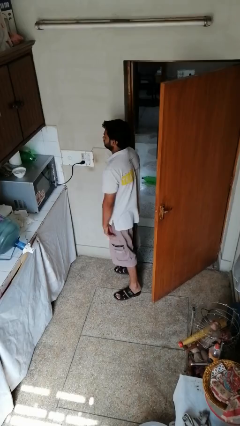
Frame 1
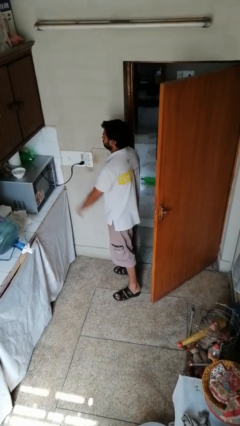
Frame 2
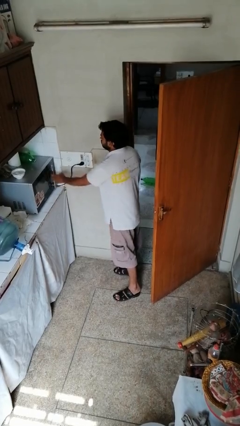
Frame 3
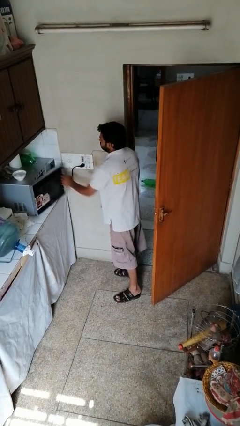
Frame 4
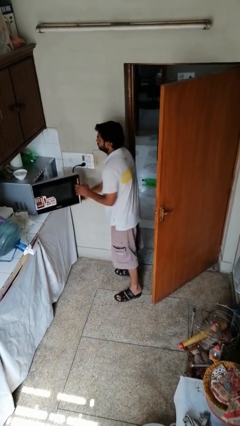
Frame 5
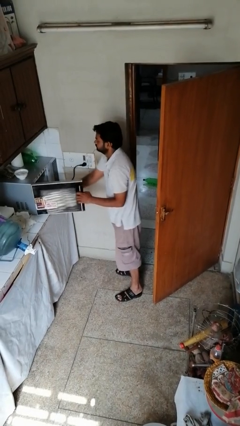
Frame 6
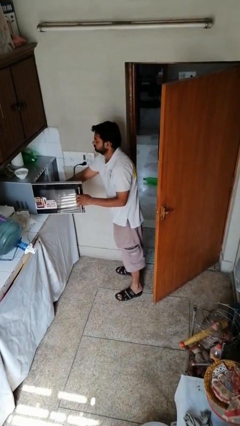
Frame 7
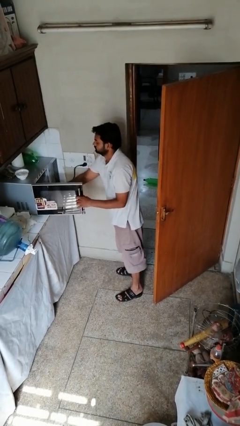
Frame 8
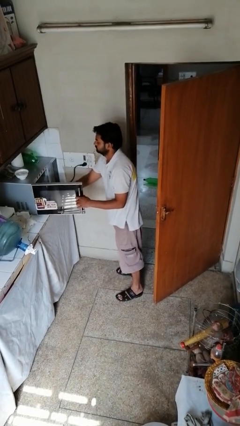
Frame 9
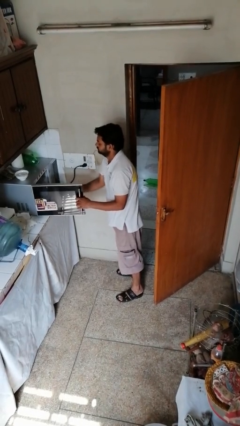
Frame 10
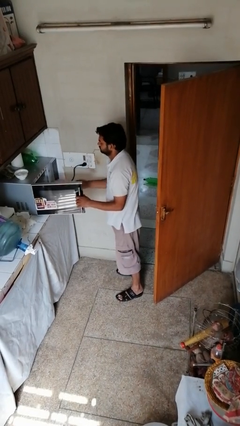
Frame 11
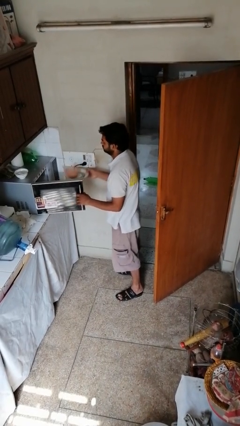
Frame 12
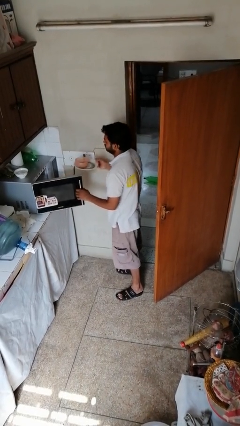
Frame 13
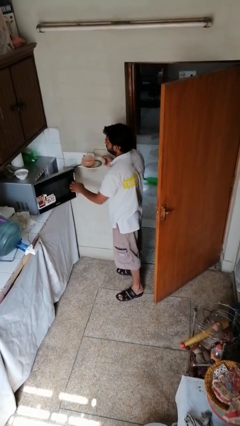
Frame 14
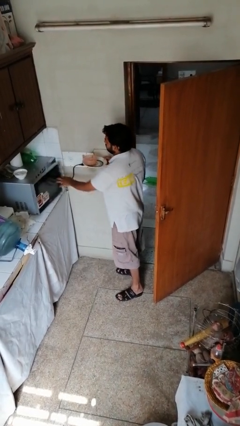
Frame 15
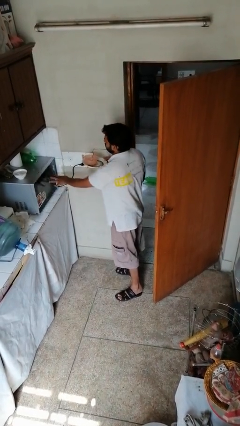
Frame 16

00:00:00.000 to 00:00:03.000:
person takes object from microwave

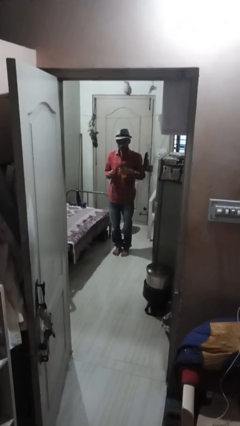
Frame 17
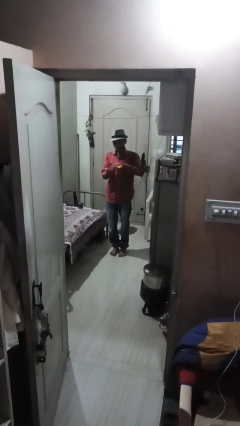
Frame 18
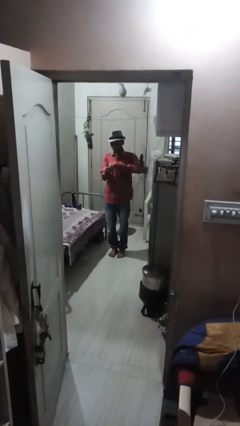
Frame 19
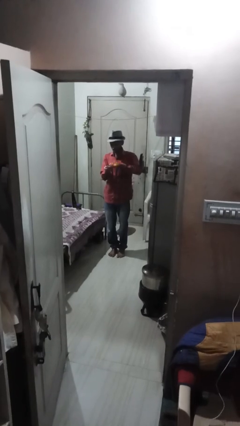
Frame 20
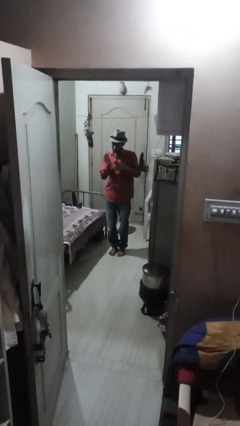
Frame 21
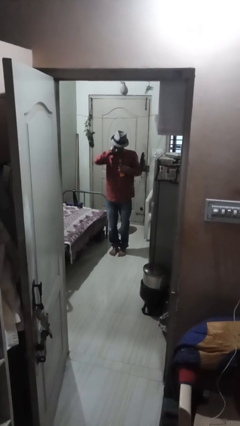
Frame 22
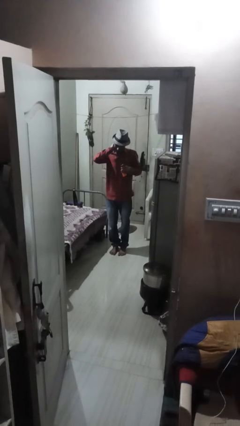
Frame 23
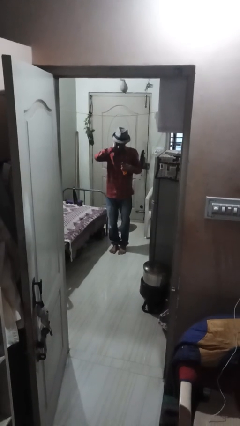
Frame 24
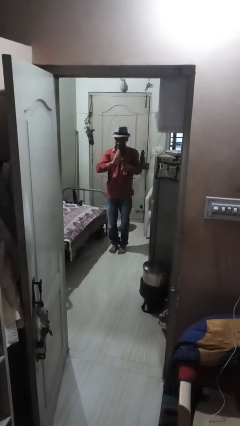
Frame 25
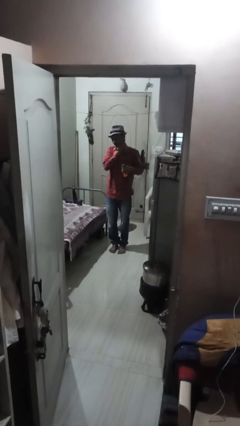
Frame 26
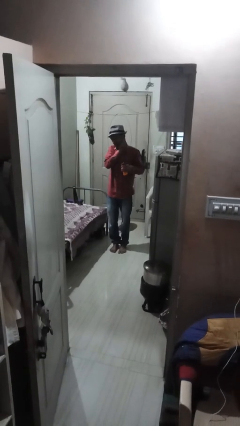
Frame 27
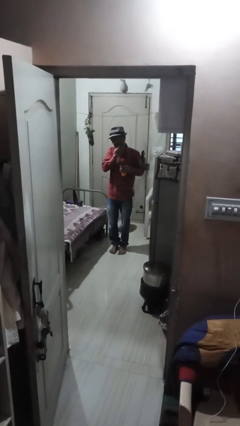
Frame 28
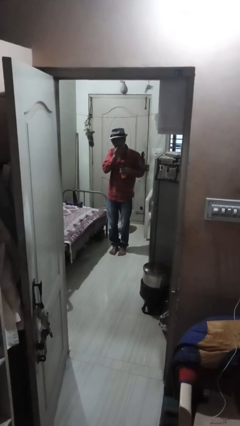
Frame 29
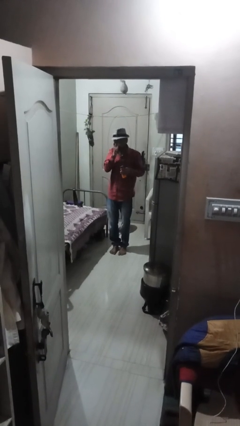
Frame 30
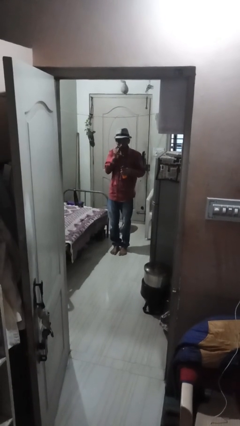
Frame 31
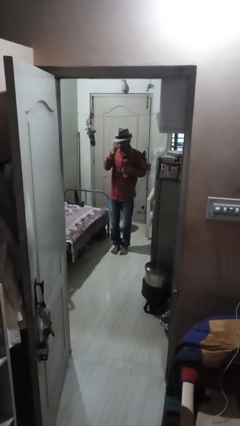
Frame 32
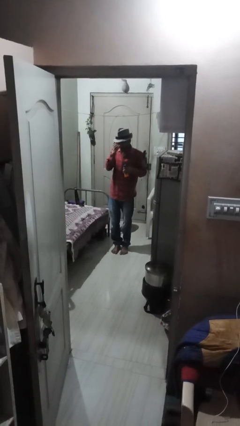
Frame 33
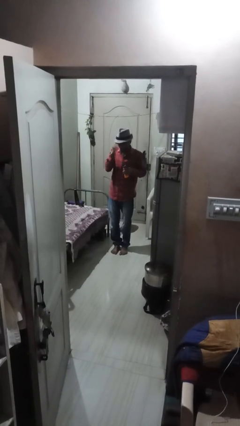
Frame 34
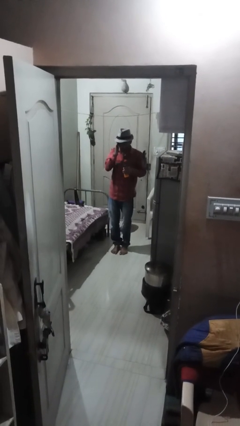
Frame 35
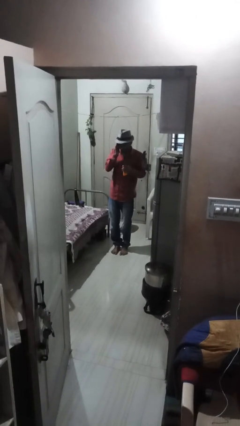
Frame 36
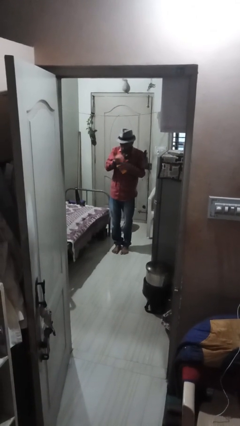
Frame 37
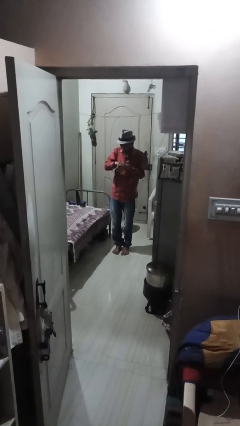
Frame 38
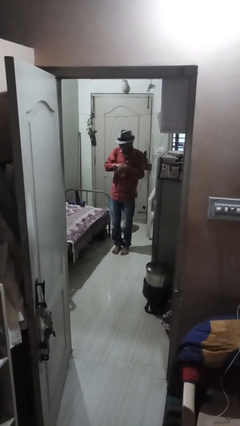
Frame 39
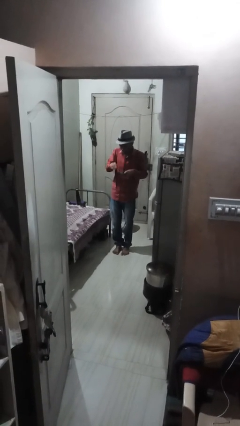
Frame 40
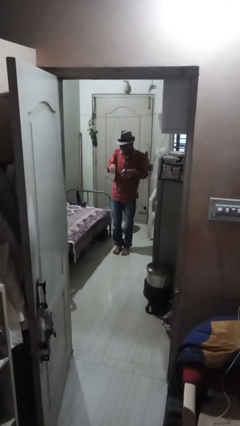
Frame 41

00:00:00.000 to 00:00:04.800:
person applies sunscreen

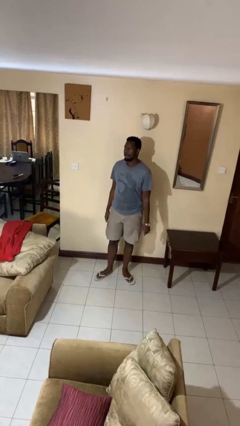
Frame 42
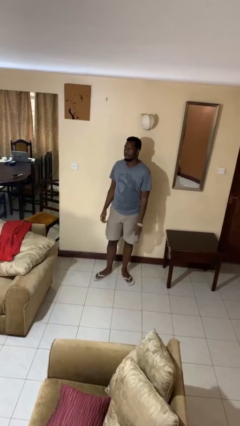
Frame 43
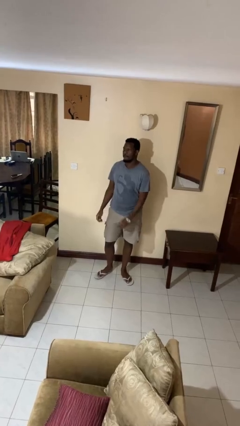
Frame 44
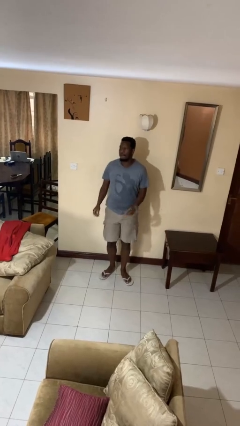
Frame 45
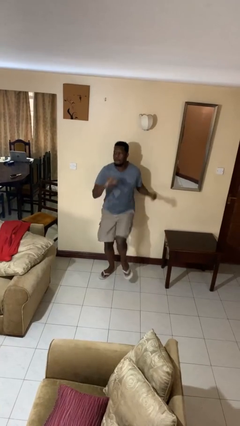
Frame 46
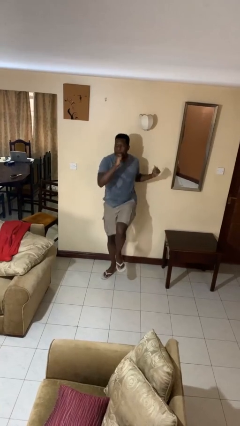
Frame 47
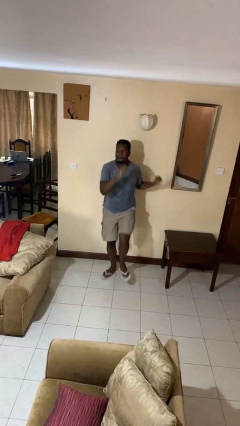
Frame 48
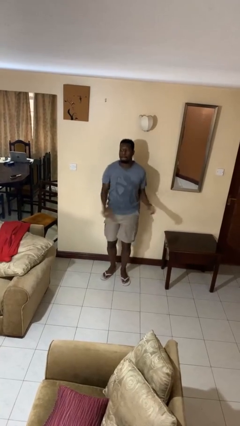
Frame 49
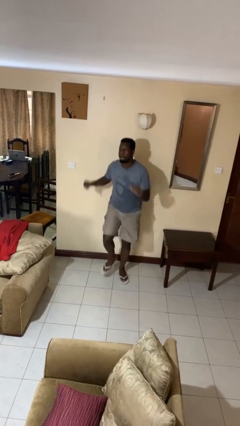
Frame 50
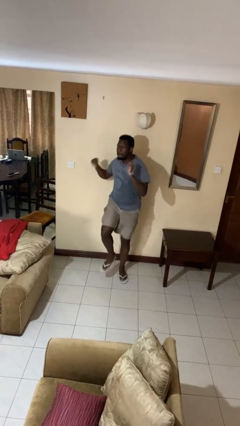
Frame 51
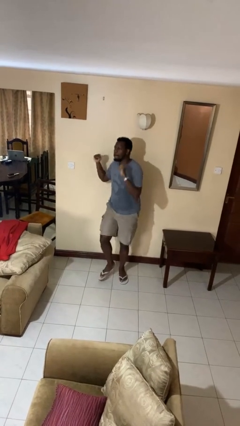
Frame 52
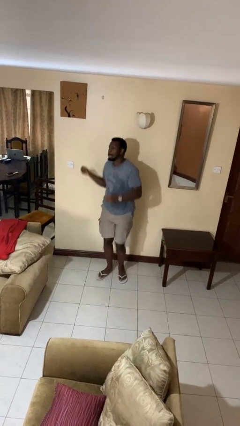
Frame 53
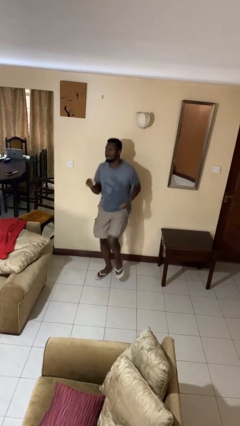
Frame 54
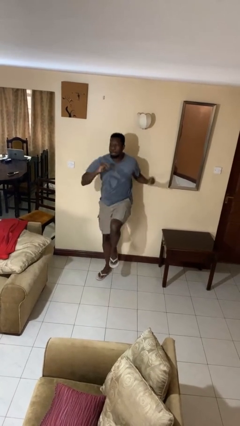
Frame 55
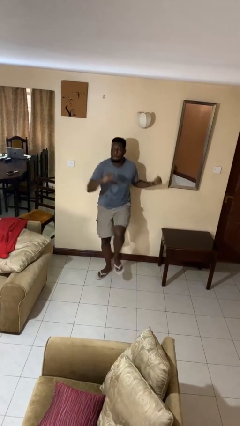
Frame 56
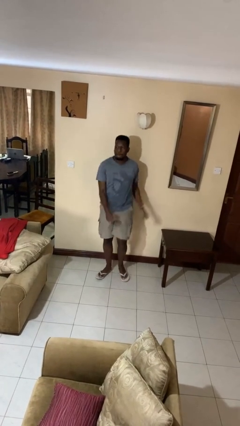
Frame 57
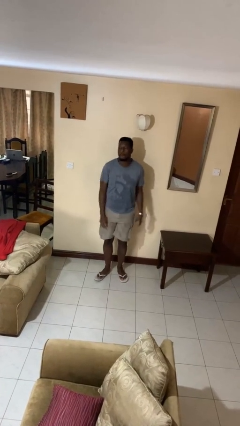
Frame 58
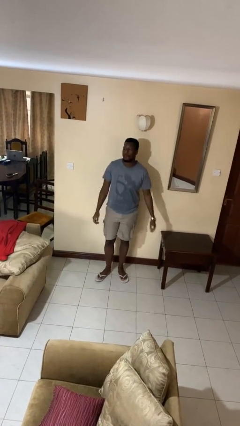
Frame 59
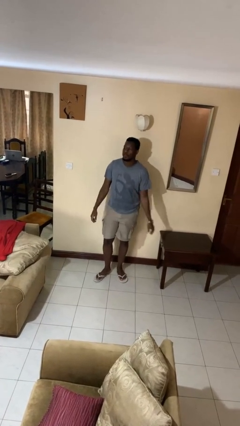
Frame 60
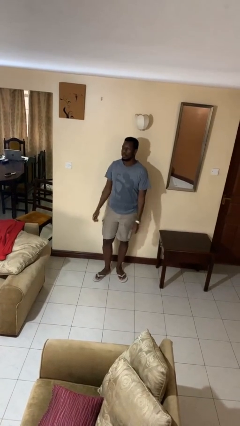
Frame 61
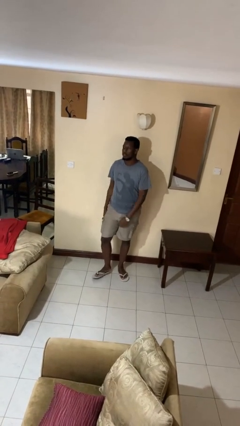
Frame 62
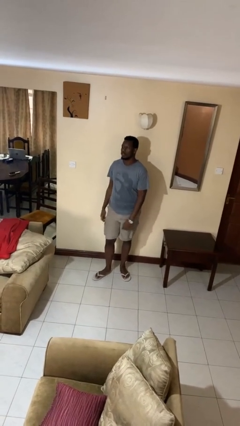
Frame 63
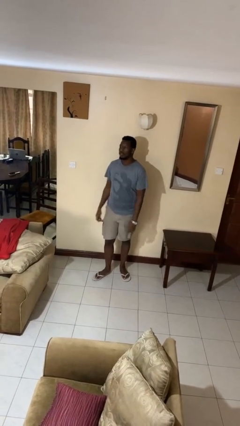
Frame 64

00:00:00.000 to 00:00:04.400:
person dances in place

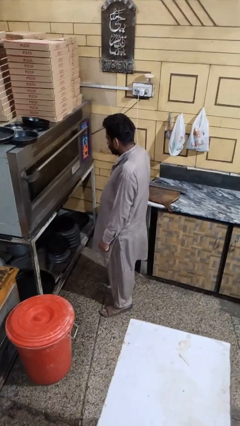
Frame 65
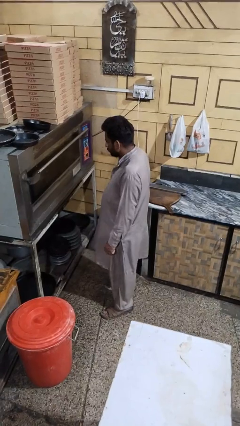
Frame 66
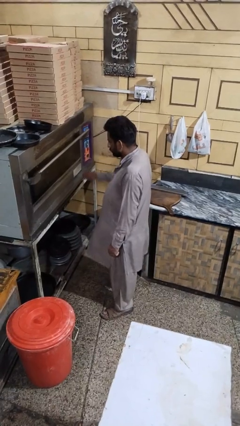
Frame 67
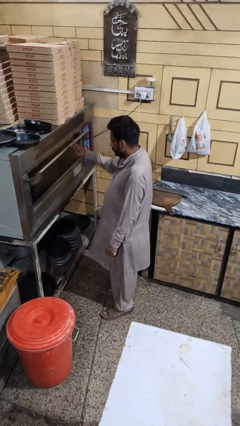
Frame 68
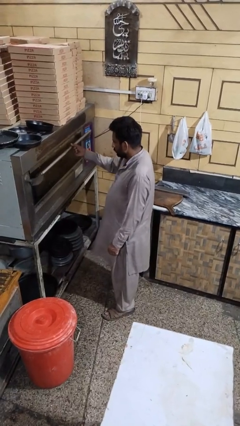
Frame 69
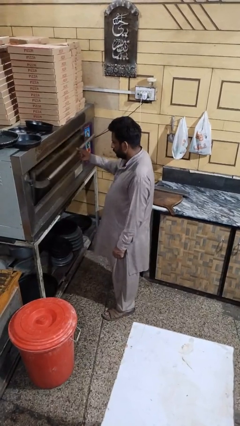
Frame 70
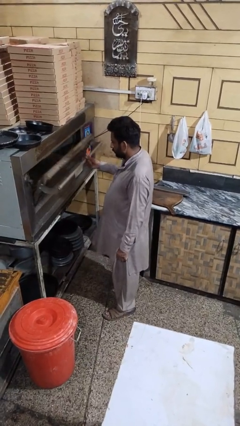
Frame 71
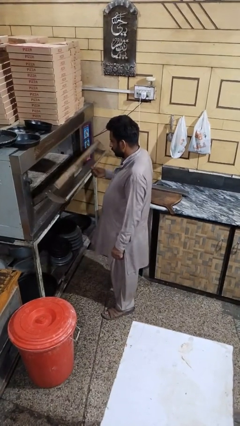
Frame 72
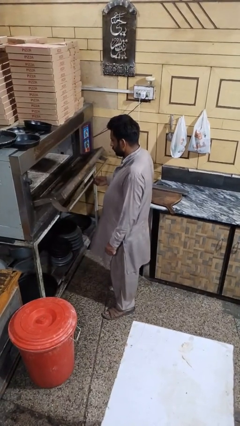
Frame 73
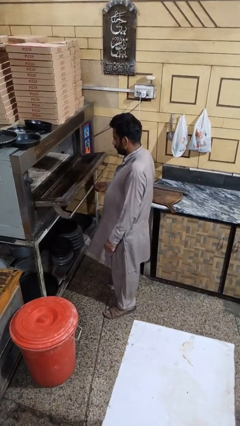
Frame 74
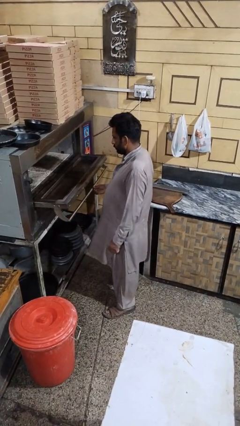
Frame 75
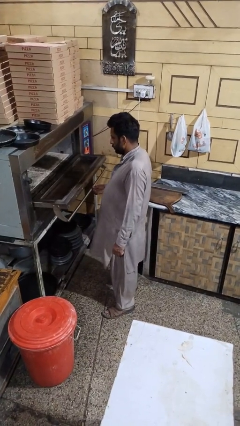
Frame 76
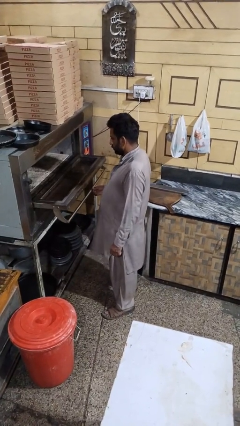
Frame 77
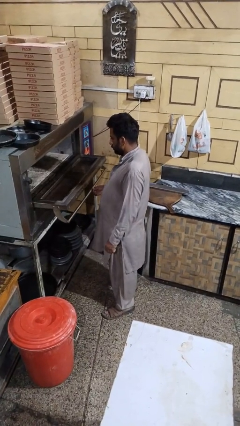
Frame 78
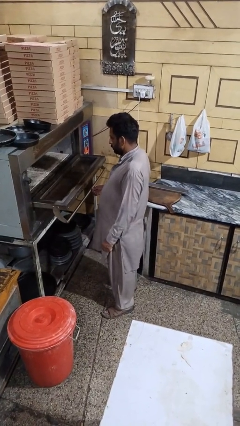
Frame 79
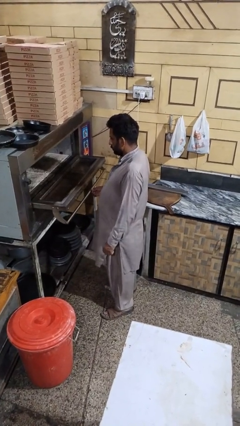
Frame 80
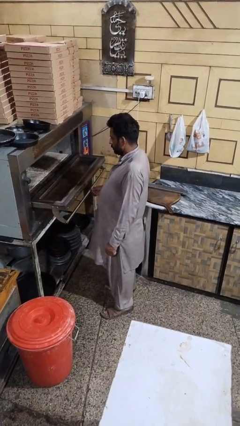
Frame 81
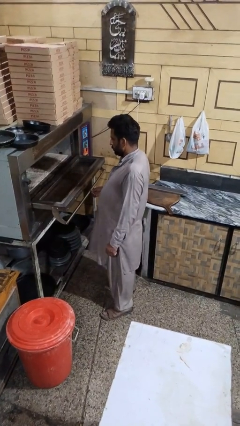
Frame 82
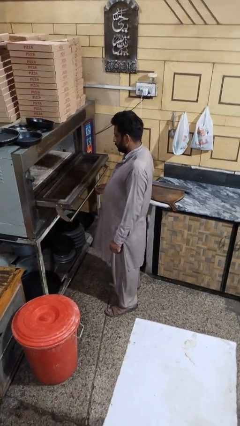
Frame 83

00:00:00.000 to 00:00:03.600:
person opens microwave

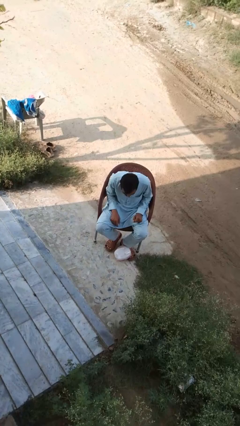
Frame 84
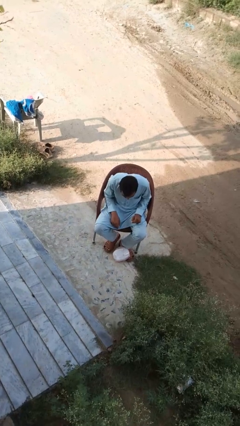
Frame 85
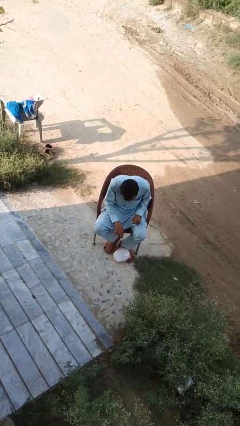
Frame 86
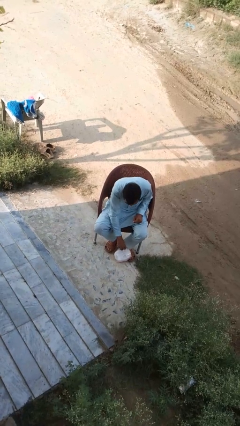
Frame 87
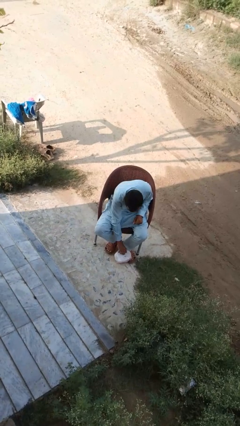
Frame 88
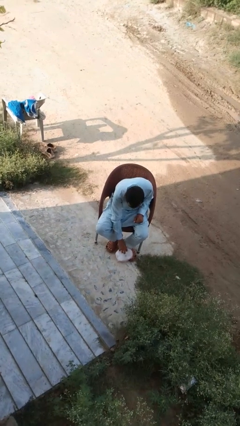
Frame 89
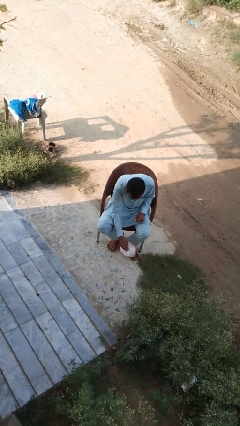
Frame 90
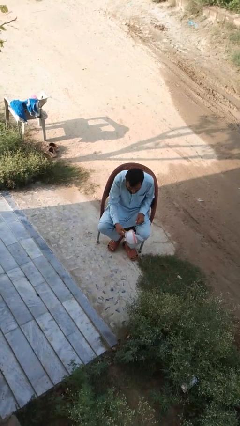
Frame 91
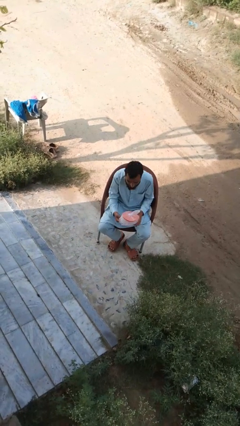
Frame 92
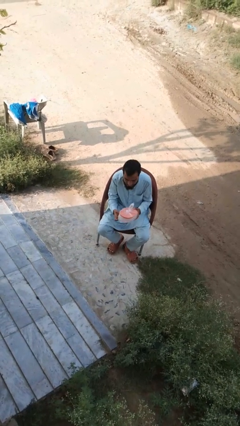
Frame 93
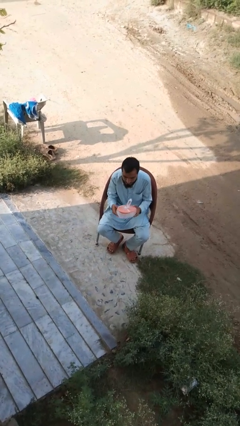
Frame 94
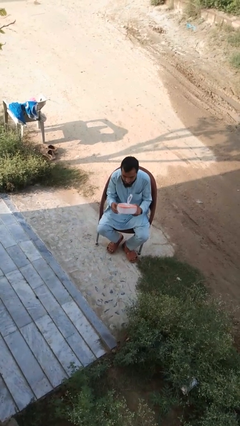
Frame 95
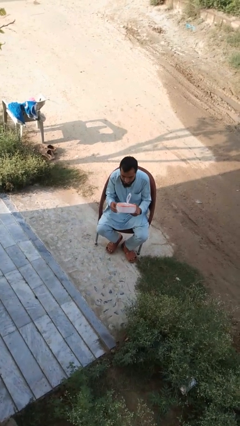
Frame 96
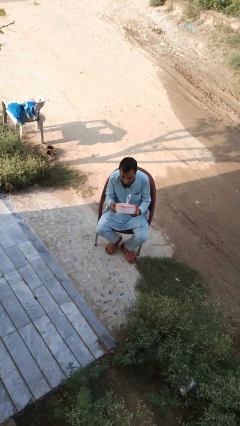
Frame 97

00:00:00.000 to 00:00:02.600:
person picks up object from floor
